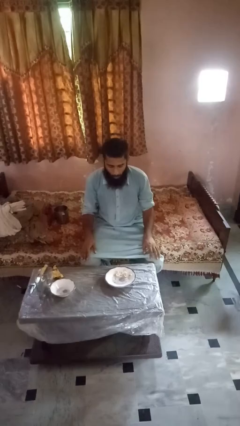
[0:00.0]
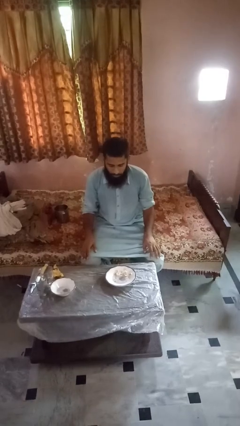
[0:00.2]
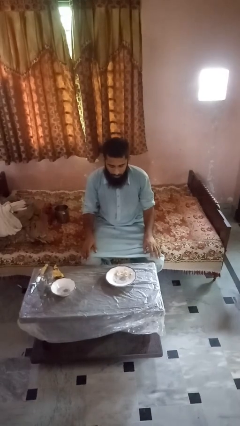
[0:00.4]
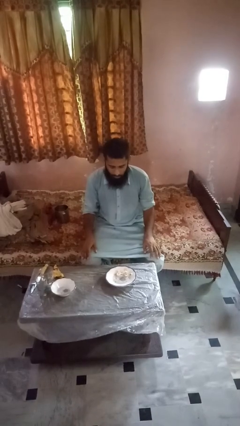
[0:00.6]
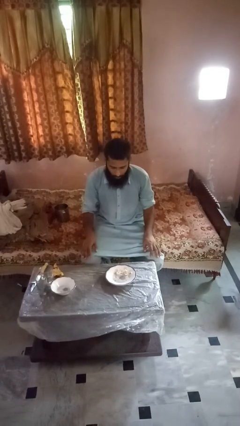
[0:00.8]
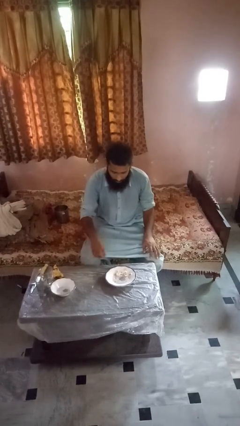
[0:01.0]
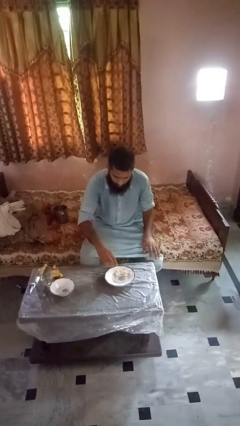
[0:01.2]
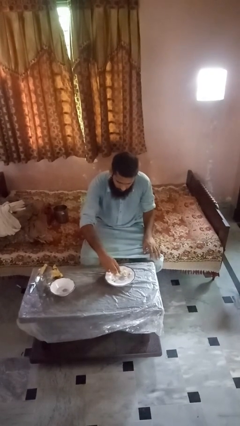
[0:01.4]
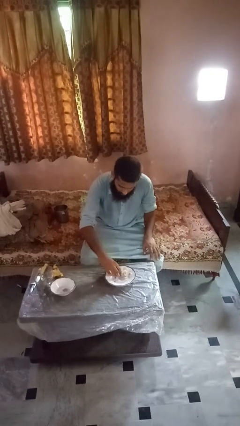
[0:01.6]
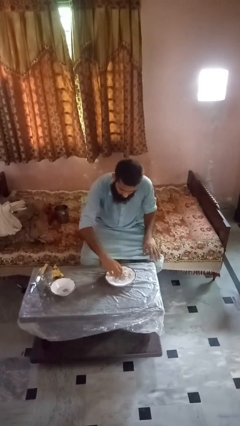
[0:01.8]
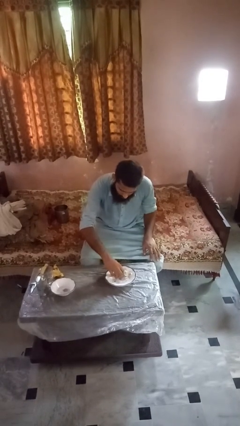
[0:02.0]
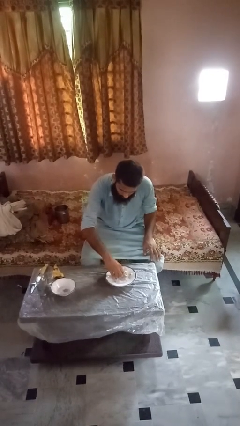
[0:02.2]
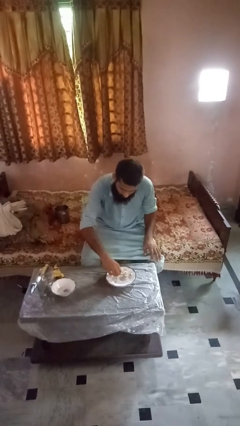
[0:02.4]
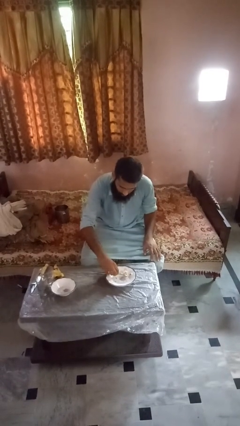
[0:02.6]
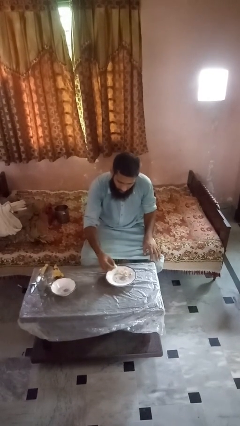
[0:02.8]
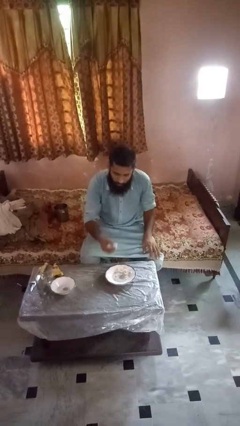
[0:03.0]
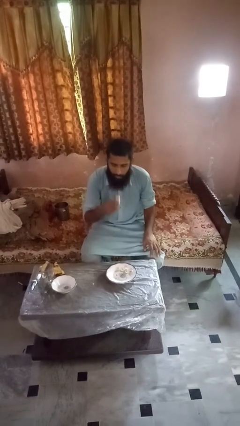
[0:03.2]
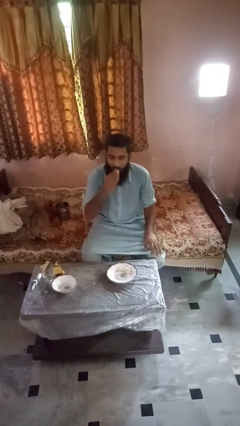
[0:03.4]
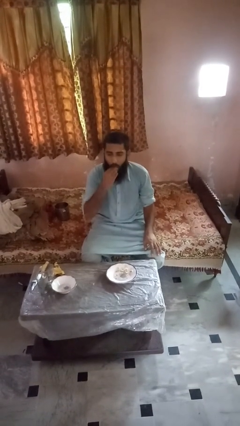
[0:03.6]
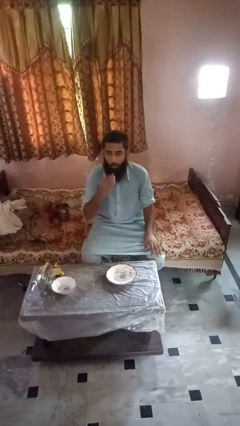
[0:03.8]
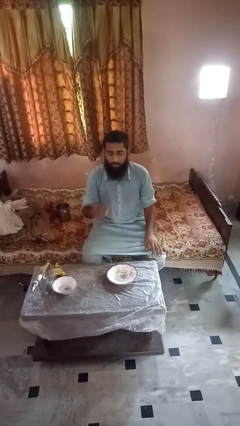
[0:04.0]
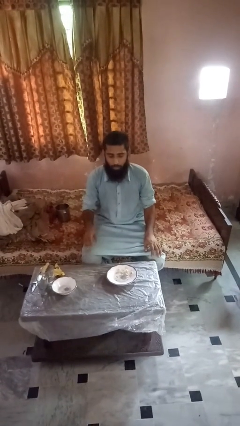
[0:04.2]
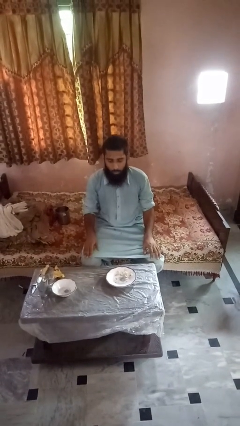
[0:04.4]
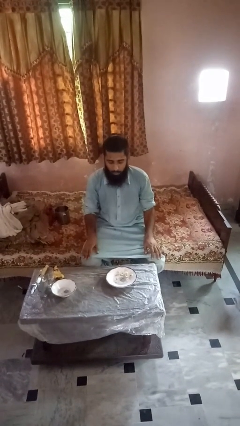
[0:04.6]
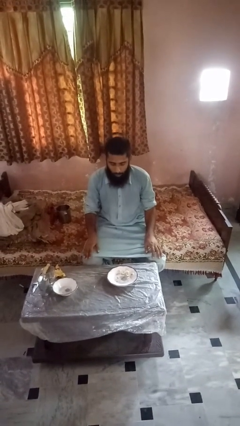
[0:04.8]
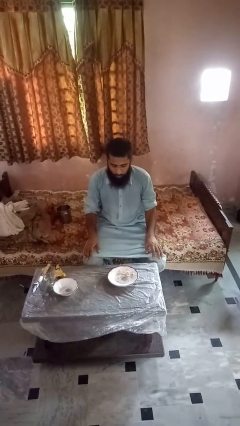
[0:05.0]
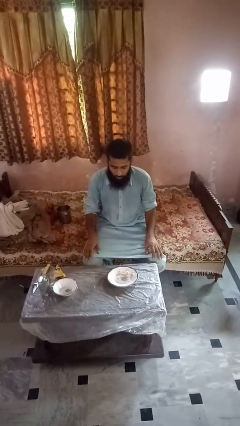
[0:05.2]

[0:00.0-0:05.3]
person eats with hands

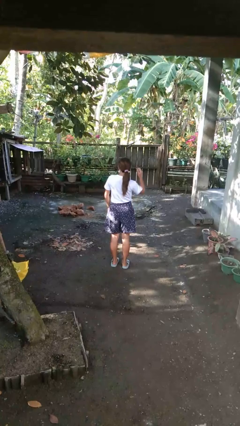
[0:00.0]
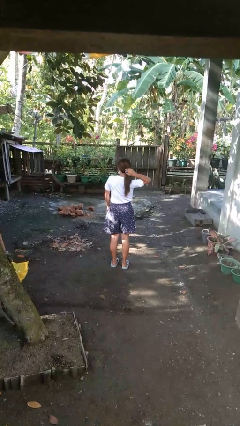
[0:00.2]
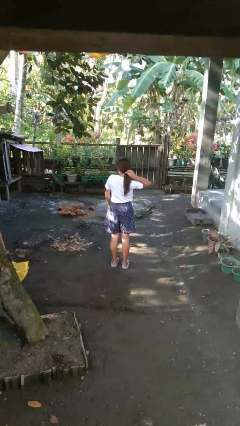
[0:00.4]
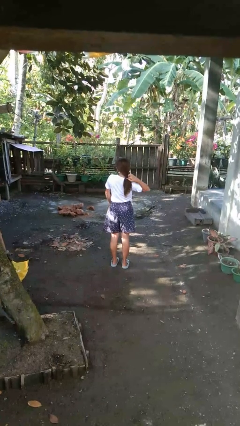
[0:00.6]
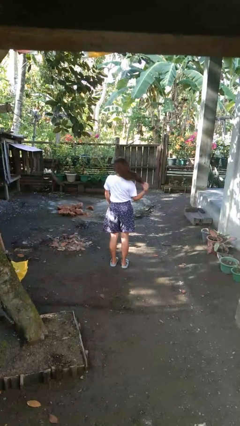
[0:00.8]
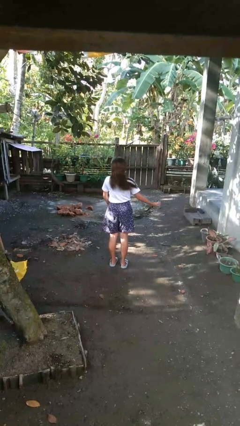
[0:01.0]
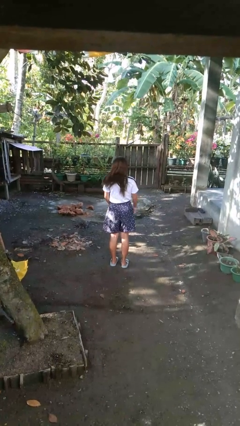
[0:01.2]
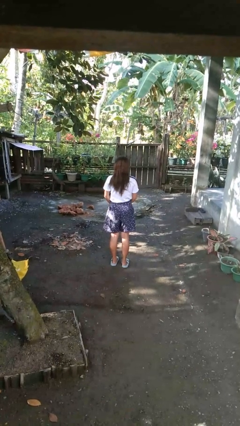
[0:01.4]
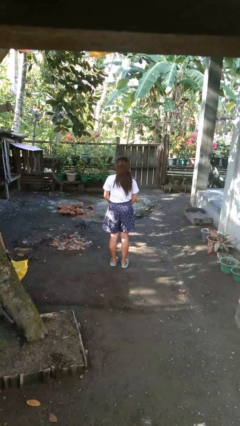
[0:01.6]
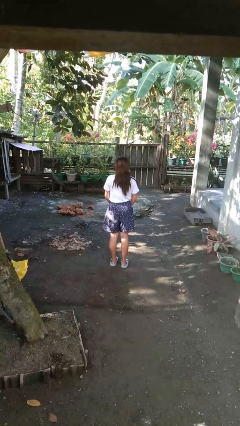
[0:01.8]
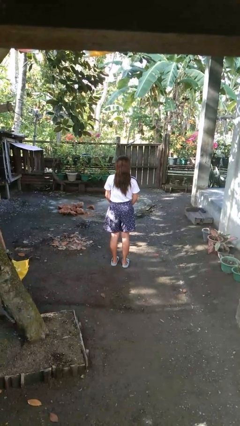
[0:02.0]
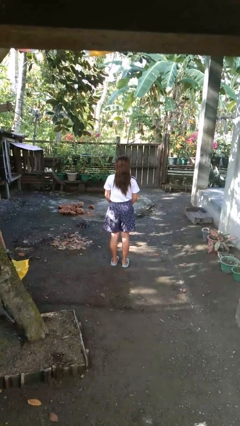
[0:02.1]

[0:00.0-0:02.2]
person takes off hairtie

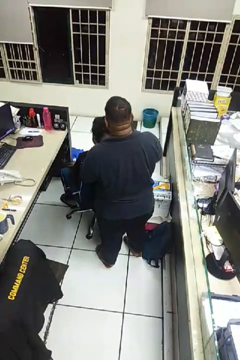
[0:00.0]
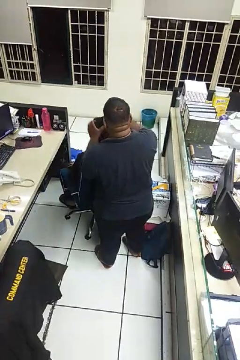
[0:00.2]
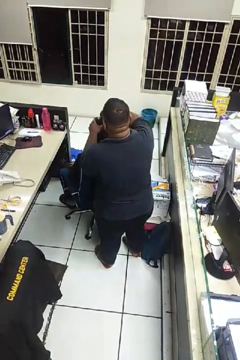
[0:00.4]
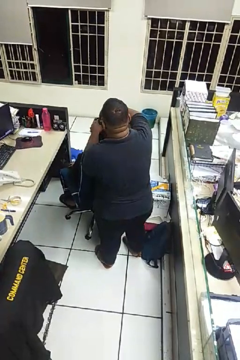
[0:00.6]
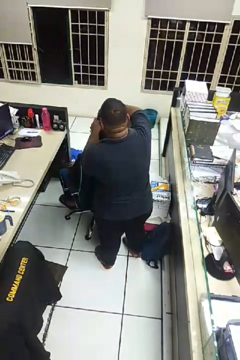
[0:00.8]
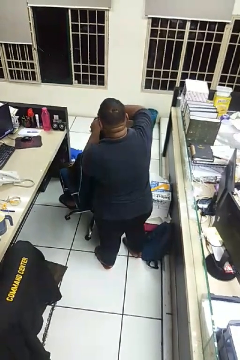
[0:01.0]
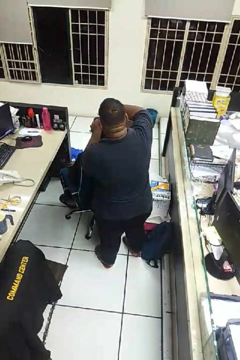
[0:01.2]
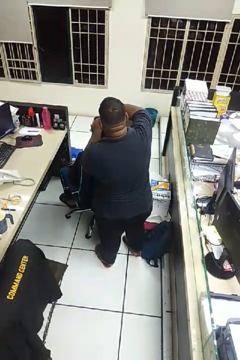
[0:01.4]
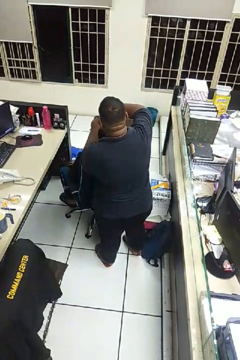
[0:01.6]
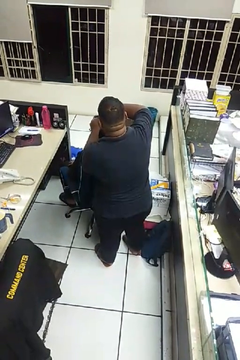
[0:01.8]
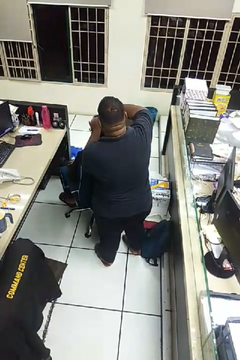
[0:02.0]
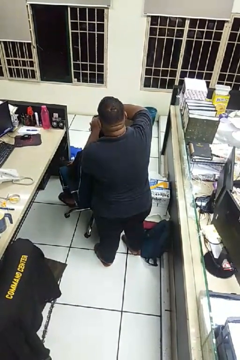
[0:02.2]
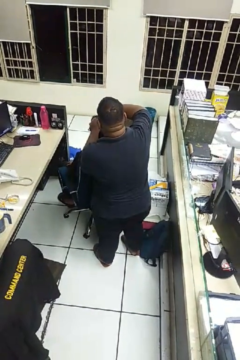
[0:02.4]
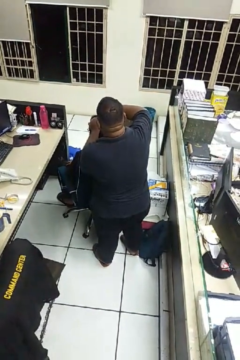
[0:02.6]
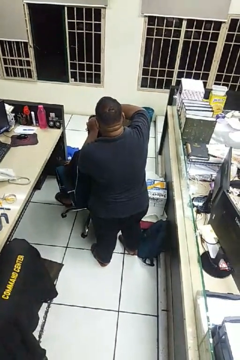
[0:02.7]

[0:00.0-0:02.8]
person braids hair of person

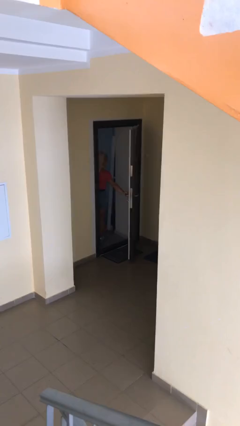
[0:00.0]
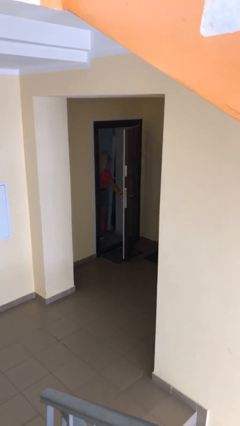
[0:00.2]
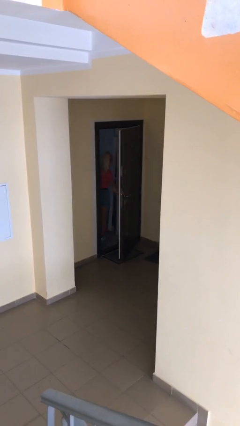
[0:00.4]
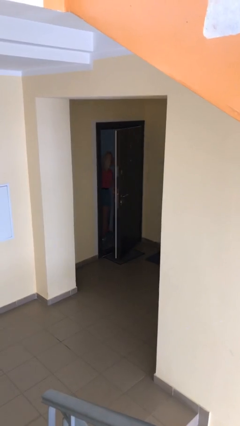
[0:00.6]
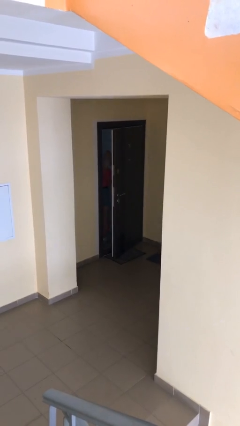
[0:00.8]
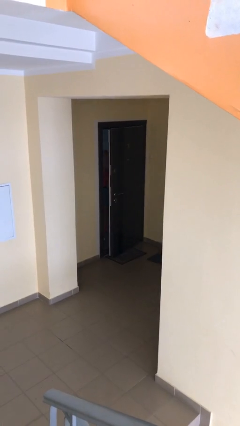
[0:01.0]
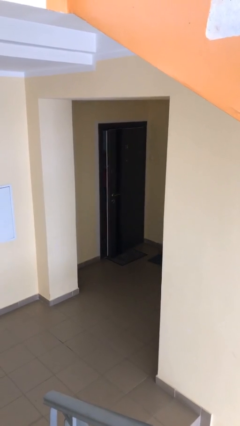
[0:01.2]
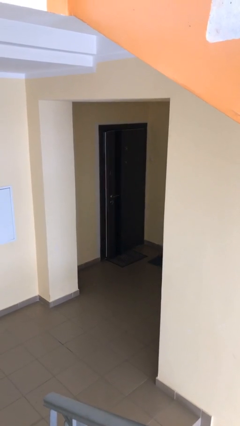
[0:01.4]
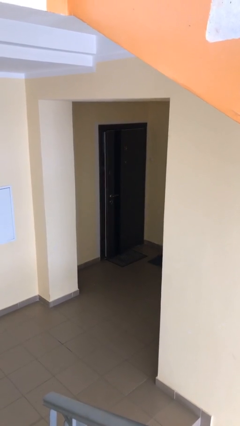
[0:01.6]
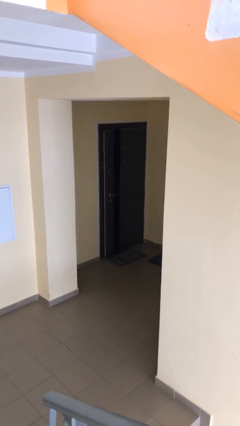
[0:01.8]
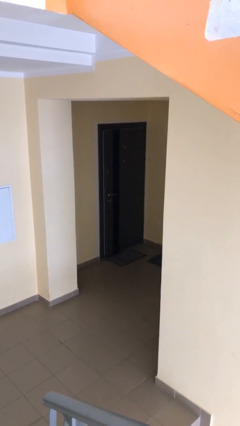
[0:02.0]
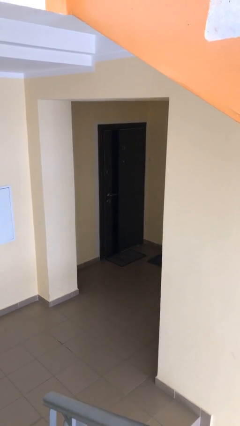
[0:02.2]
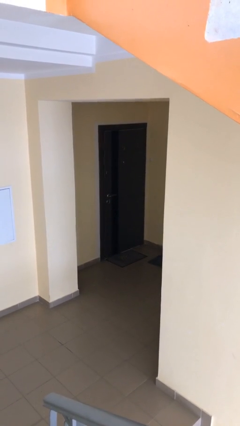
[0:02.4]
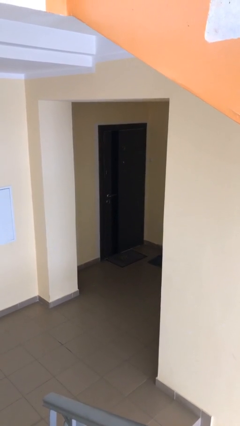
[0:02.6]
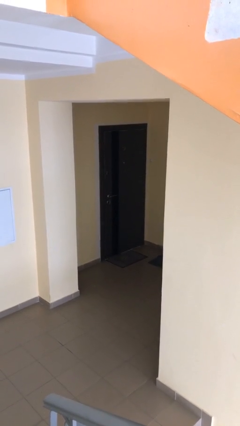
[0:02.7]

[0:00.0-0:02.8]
person closes facility door

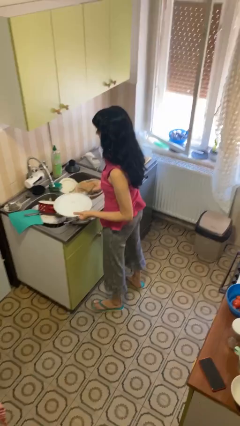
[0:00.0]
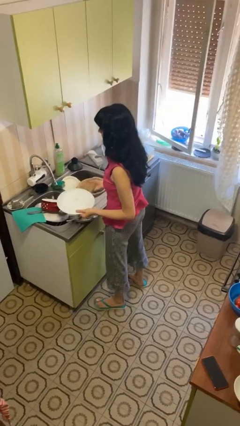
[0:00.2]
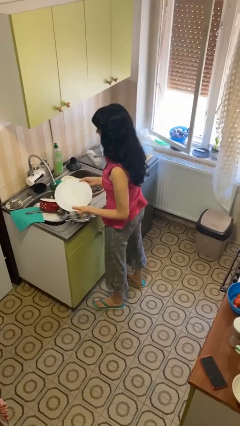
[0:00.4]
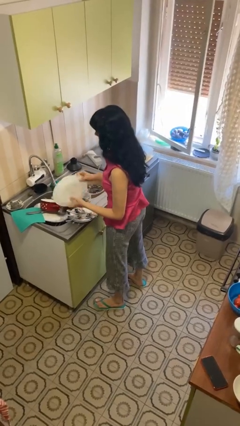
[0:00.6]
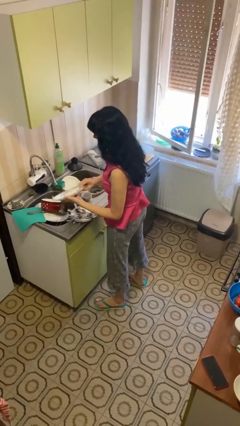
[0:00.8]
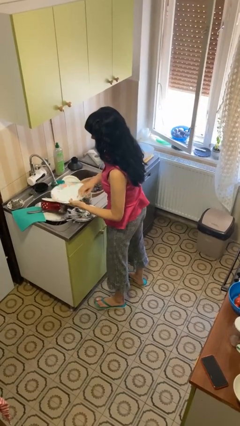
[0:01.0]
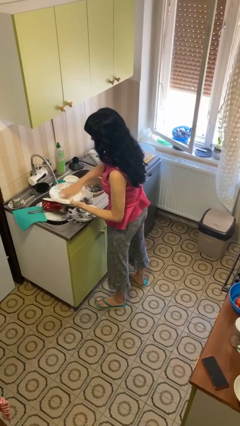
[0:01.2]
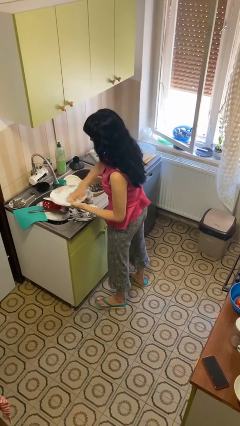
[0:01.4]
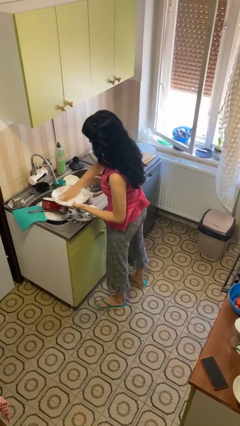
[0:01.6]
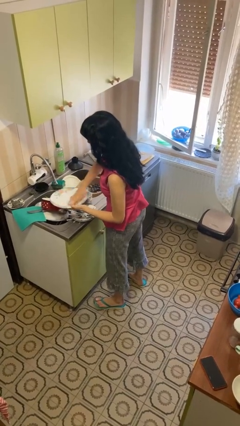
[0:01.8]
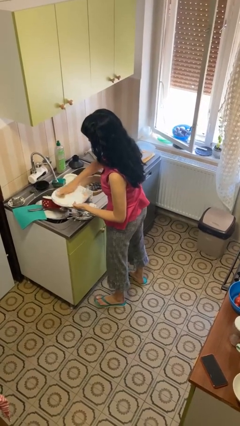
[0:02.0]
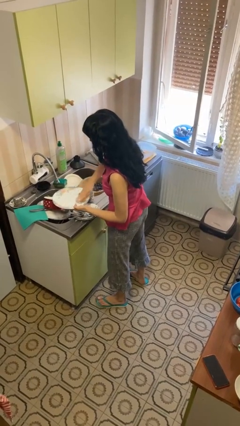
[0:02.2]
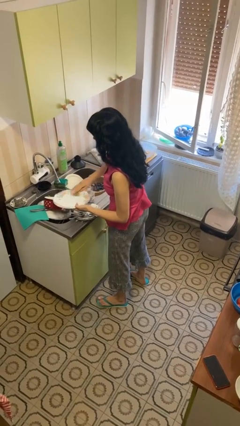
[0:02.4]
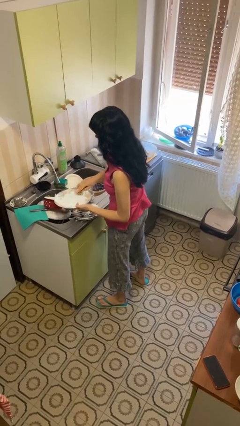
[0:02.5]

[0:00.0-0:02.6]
person washes dish

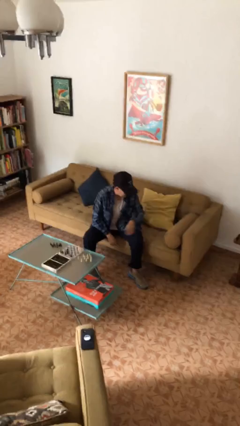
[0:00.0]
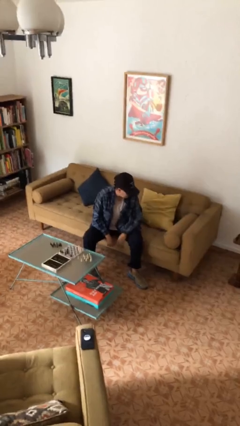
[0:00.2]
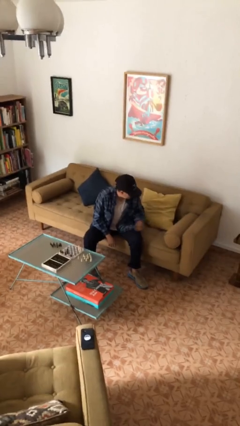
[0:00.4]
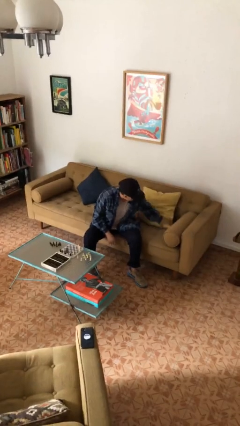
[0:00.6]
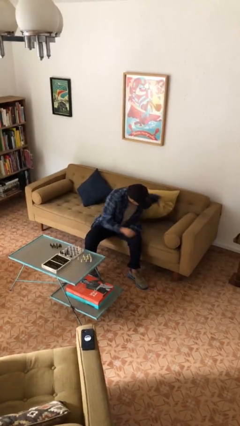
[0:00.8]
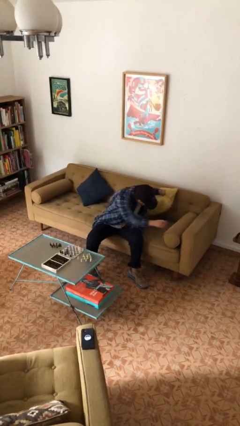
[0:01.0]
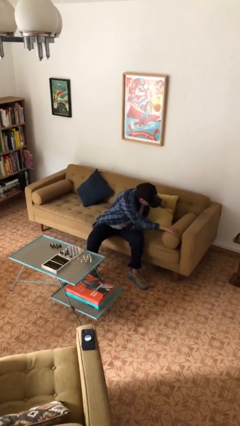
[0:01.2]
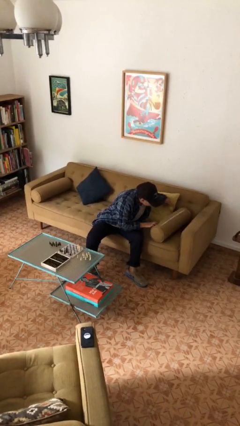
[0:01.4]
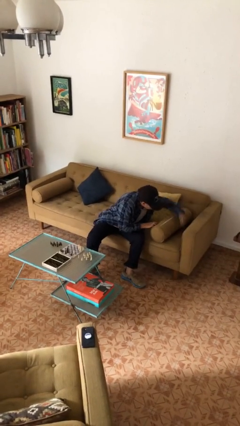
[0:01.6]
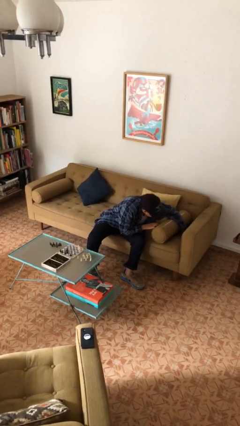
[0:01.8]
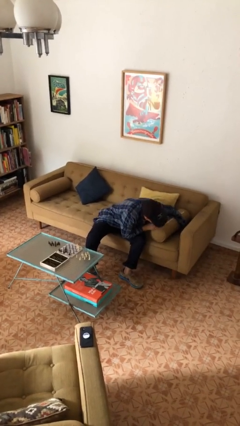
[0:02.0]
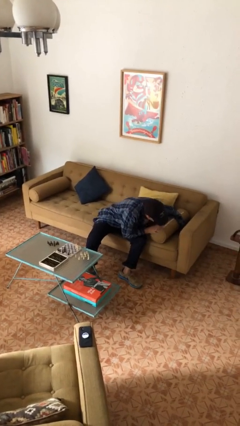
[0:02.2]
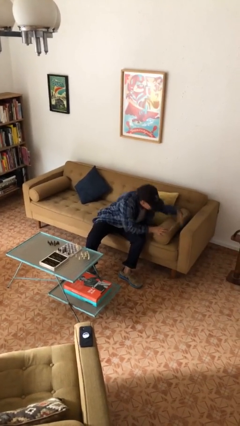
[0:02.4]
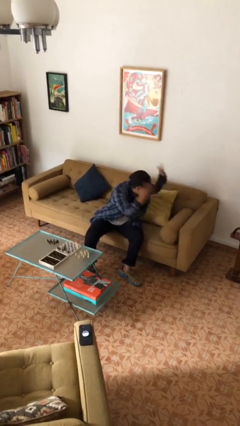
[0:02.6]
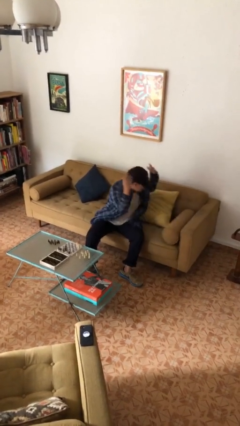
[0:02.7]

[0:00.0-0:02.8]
person searches in couch
